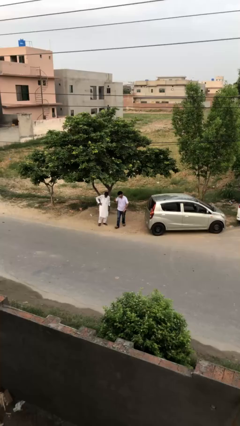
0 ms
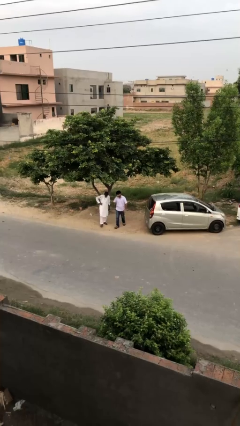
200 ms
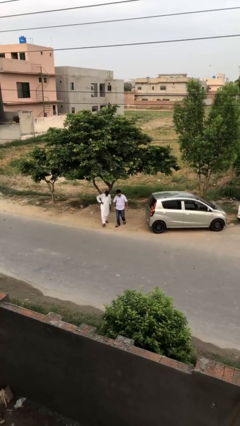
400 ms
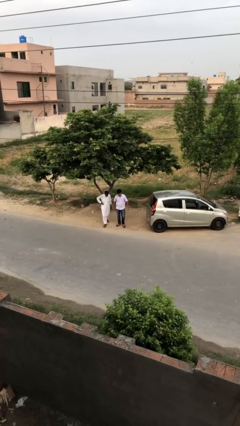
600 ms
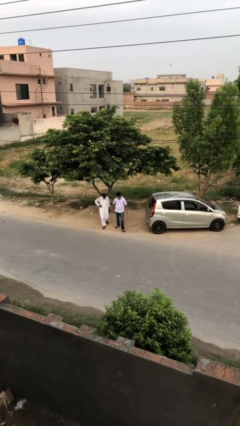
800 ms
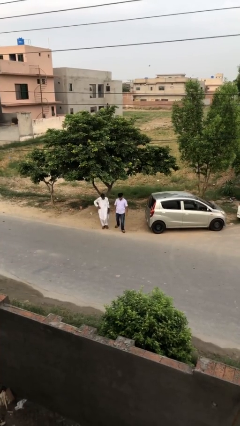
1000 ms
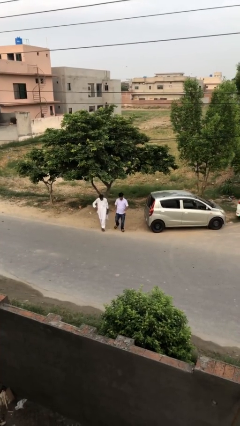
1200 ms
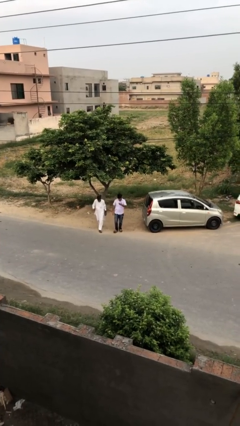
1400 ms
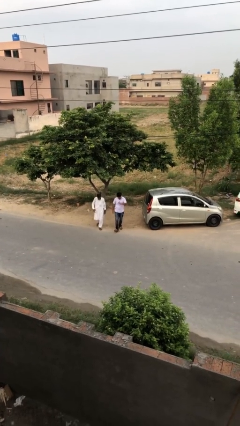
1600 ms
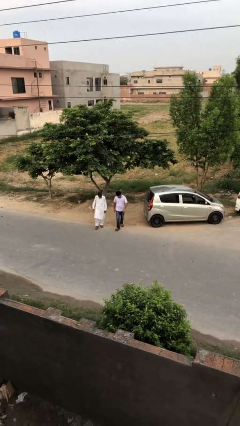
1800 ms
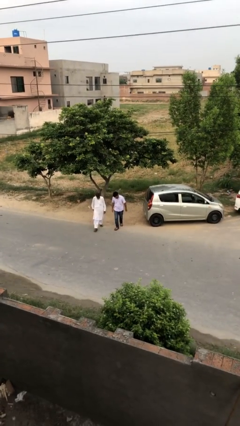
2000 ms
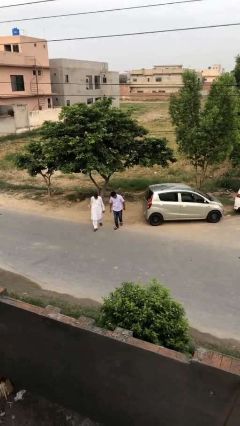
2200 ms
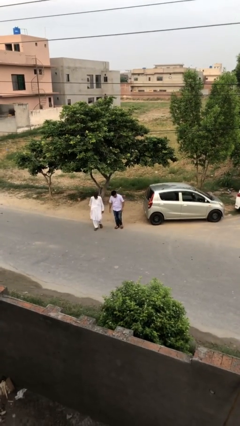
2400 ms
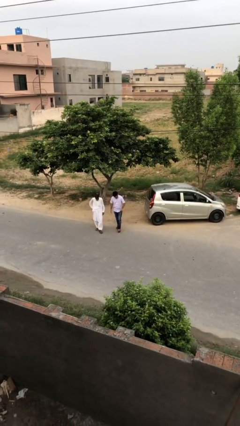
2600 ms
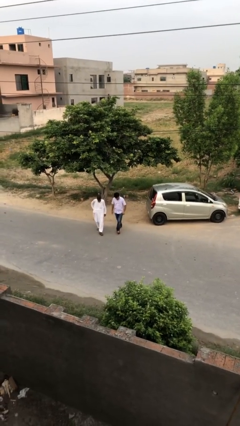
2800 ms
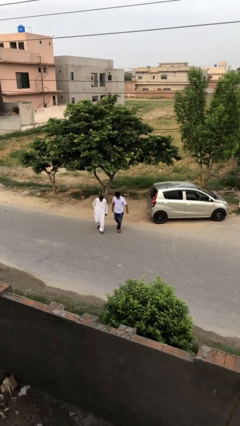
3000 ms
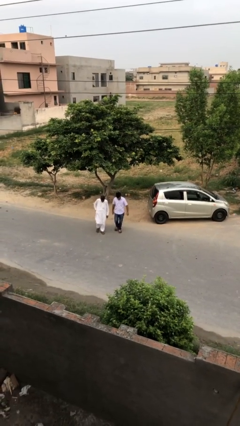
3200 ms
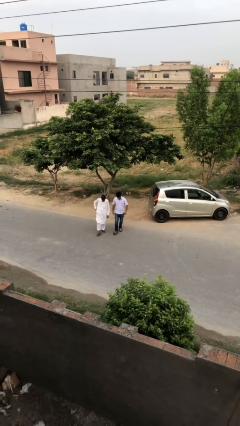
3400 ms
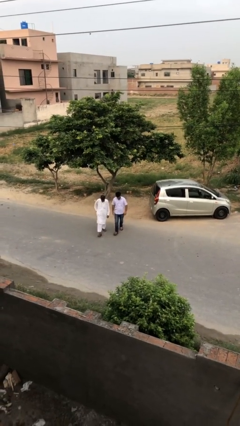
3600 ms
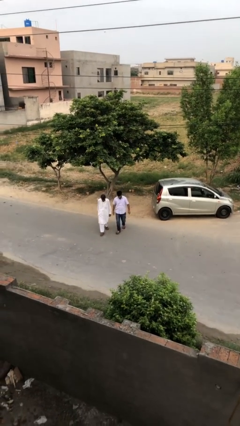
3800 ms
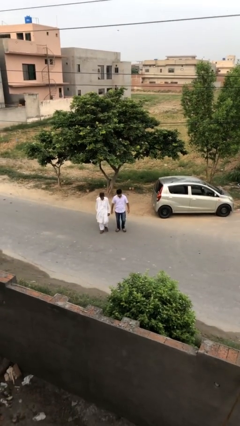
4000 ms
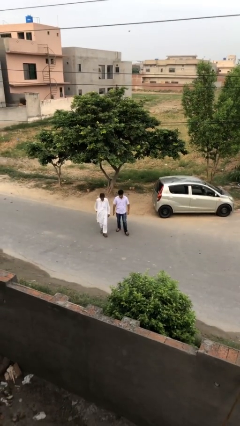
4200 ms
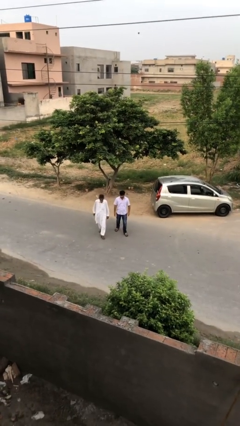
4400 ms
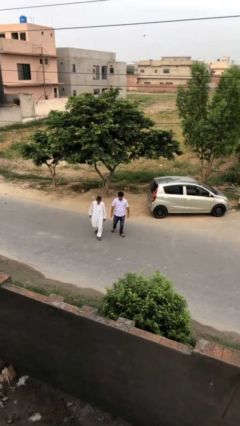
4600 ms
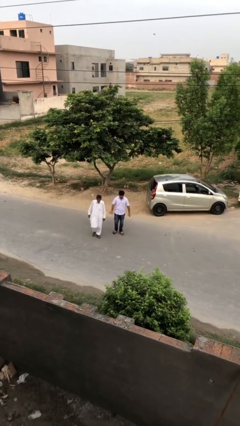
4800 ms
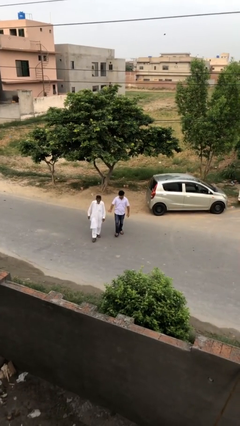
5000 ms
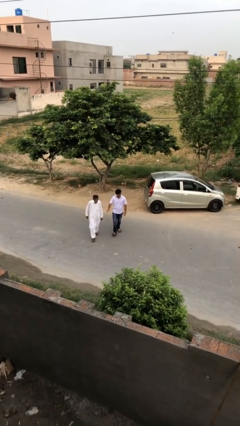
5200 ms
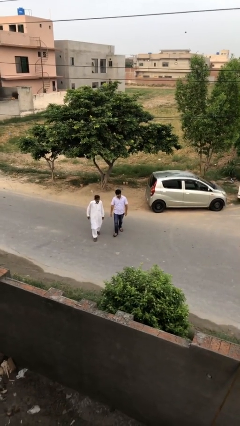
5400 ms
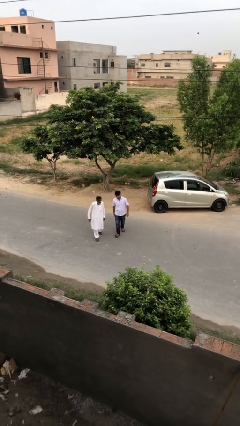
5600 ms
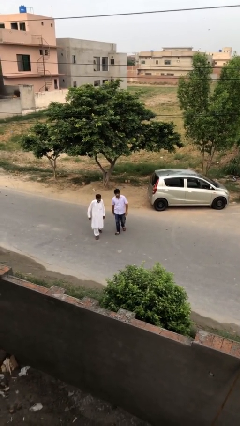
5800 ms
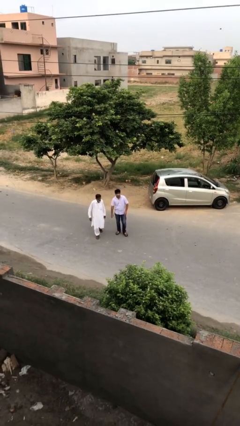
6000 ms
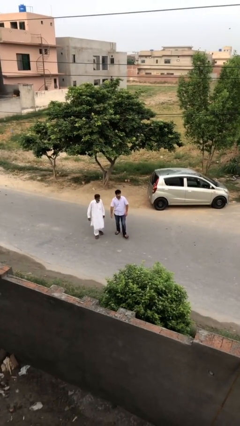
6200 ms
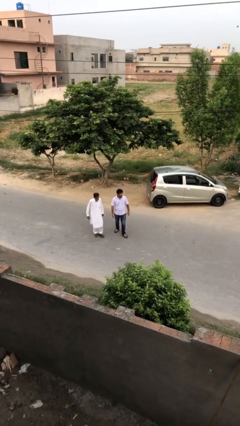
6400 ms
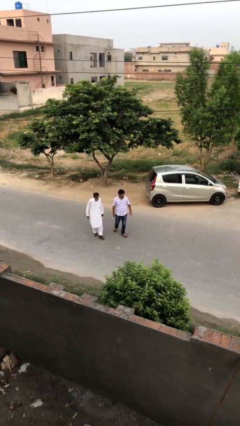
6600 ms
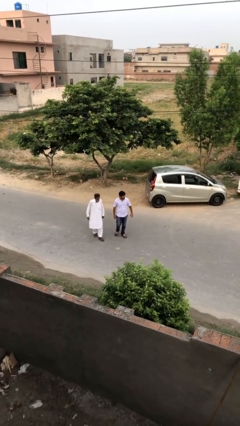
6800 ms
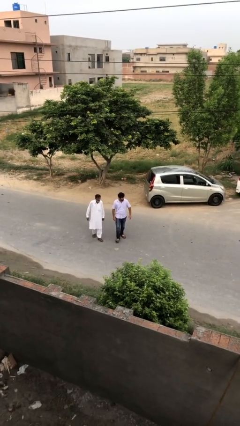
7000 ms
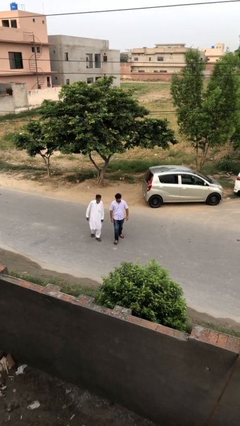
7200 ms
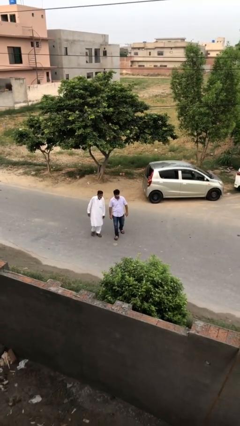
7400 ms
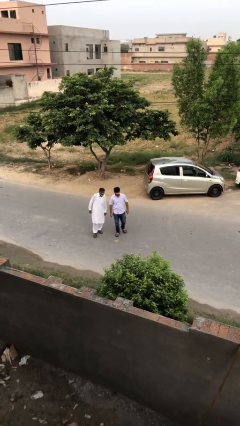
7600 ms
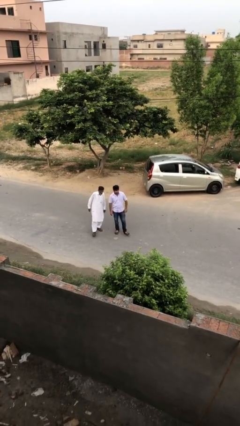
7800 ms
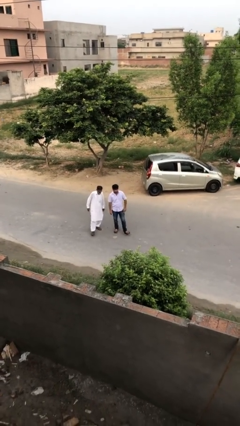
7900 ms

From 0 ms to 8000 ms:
person talks to person

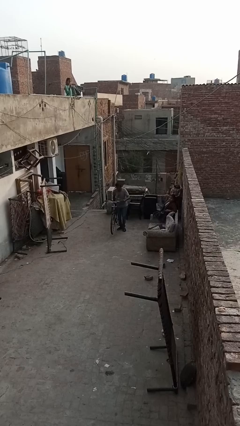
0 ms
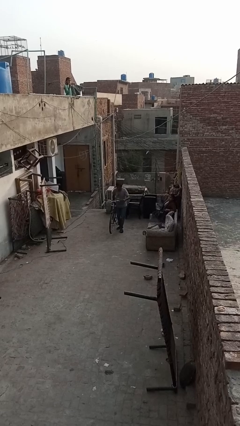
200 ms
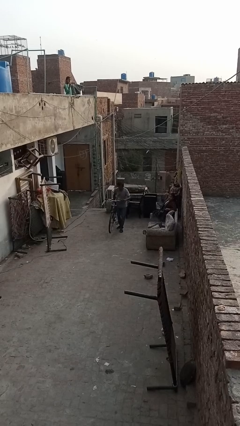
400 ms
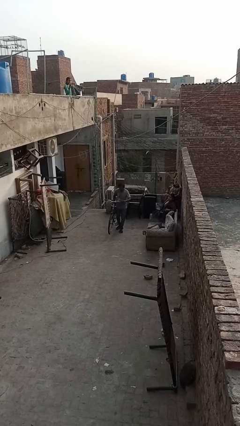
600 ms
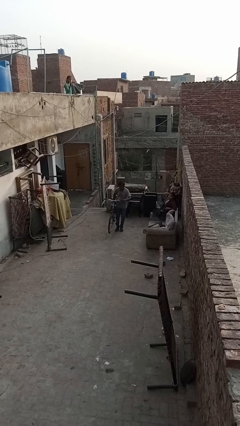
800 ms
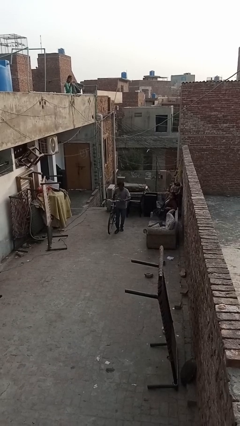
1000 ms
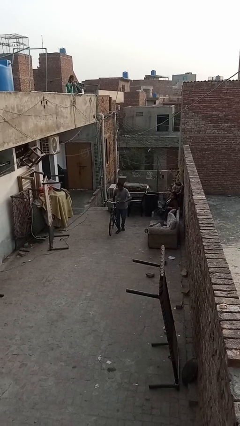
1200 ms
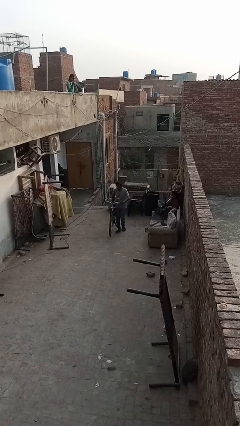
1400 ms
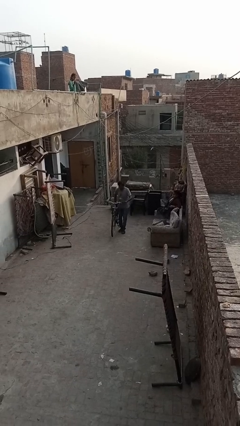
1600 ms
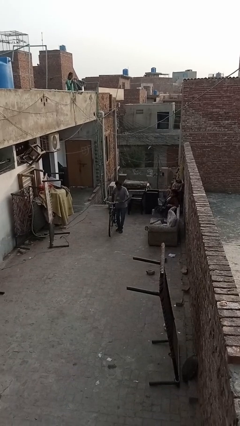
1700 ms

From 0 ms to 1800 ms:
person carries bicycle

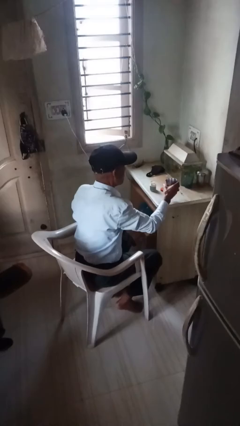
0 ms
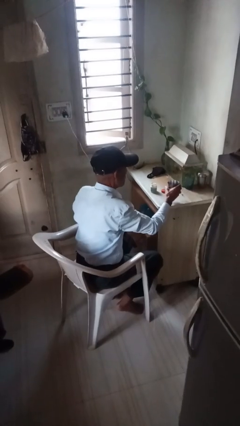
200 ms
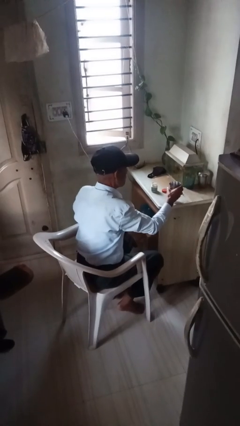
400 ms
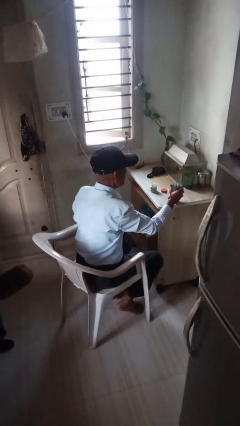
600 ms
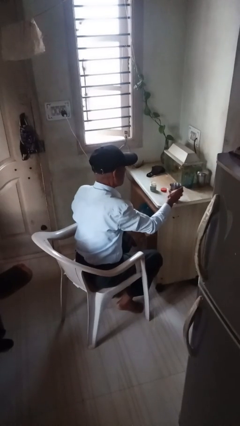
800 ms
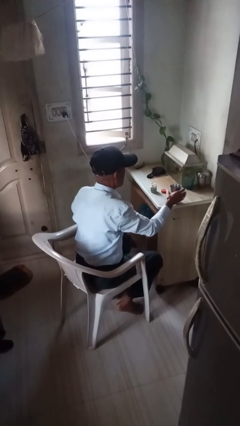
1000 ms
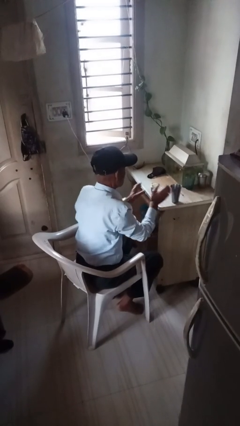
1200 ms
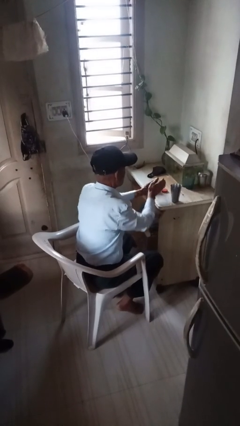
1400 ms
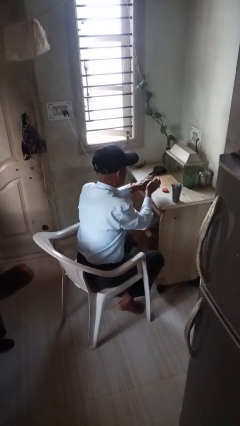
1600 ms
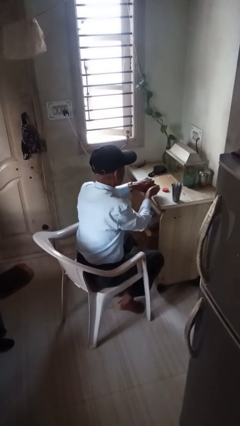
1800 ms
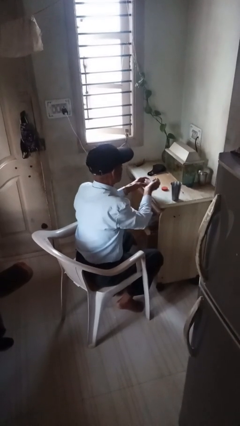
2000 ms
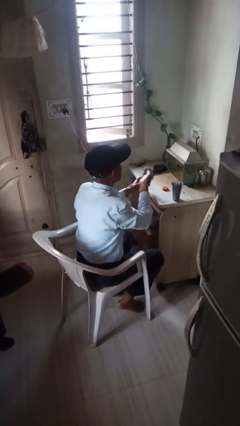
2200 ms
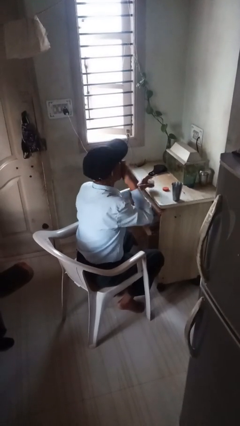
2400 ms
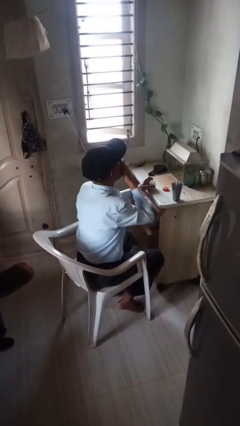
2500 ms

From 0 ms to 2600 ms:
person takes medicine pills

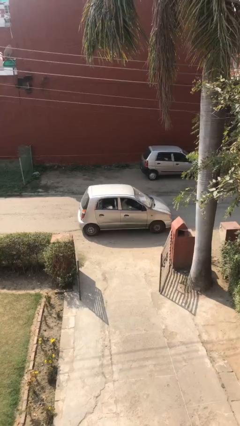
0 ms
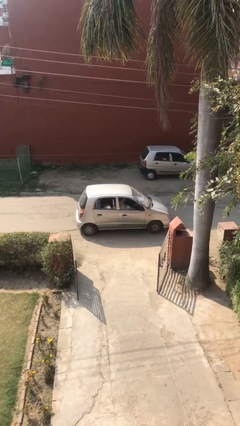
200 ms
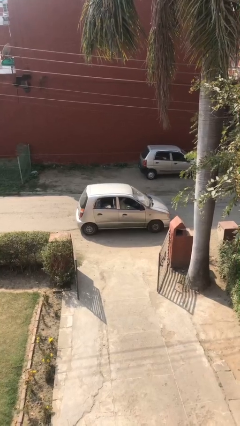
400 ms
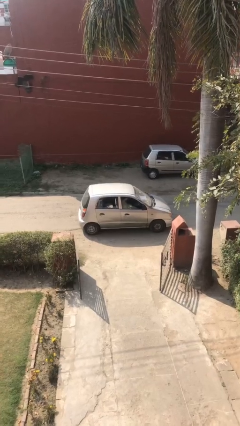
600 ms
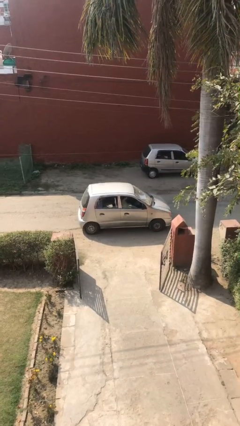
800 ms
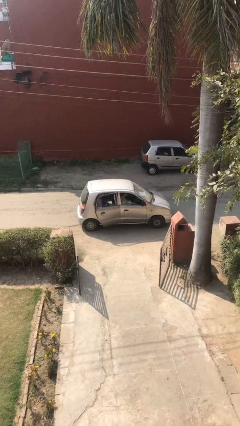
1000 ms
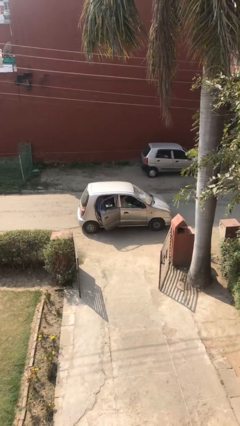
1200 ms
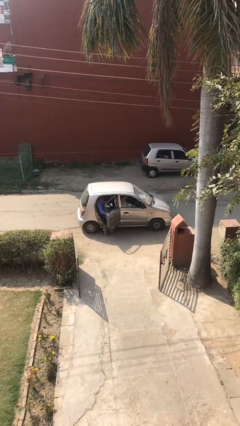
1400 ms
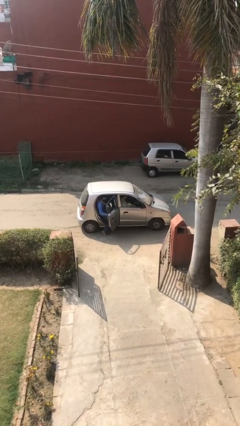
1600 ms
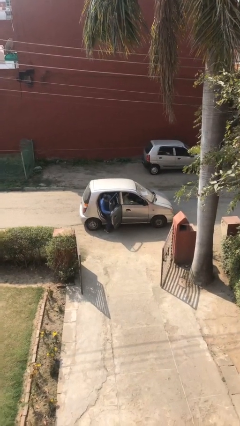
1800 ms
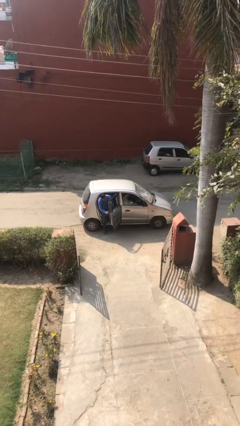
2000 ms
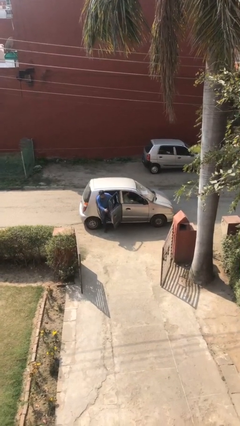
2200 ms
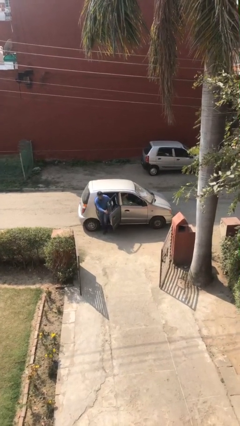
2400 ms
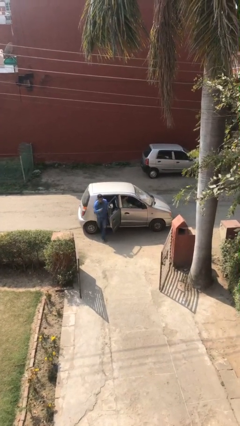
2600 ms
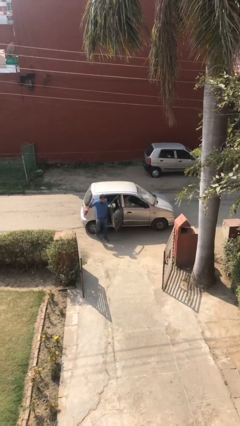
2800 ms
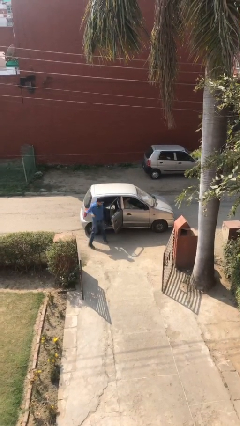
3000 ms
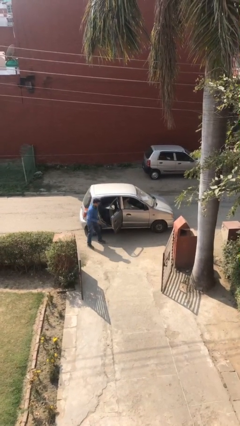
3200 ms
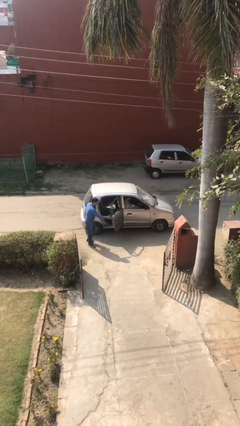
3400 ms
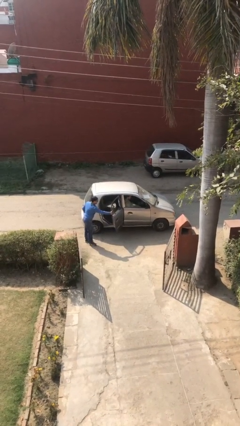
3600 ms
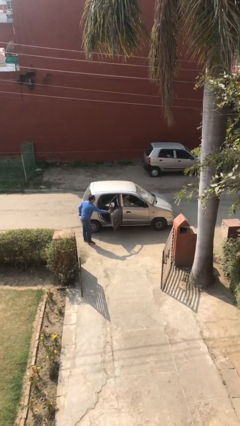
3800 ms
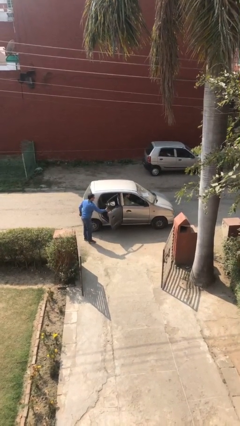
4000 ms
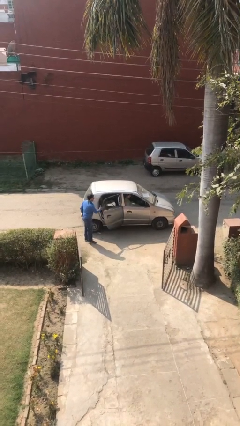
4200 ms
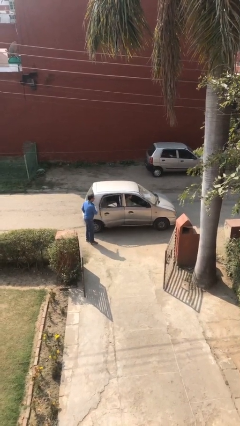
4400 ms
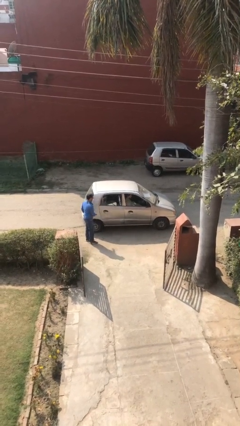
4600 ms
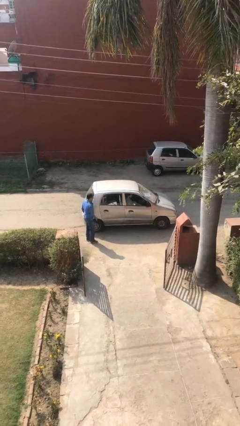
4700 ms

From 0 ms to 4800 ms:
car drops off person

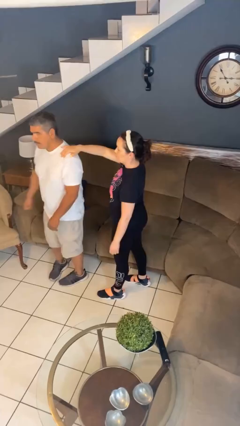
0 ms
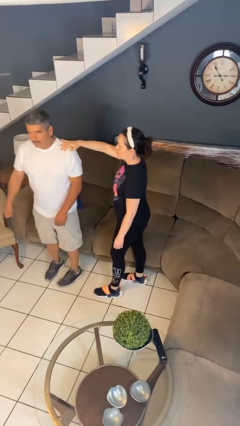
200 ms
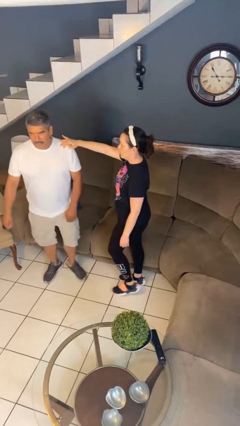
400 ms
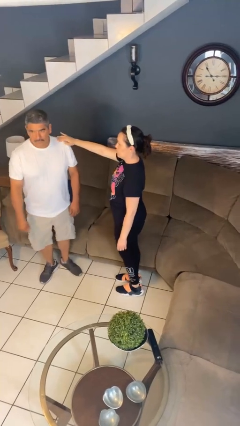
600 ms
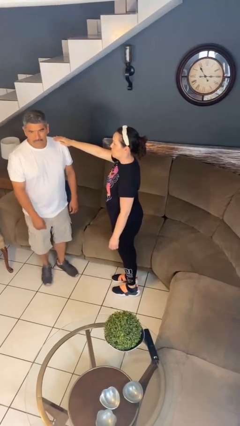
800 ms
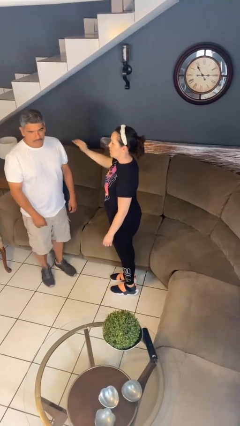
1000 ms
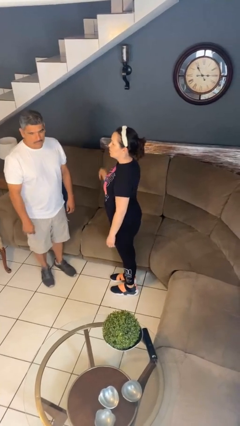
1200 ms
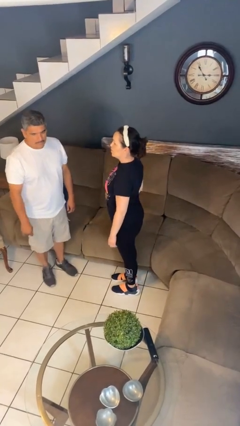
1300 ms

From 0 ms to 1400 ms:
person spins person around
